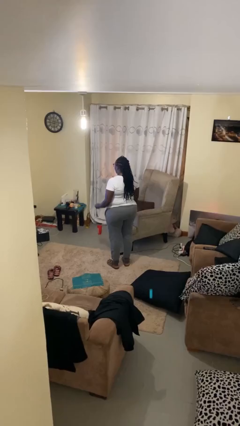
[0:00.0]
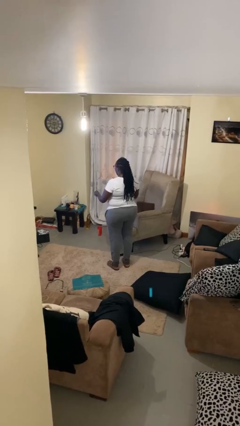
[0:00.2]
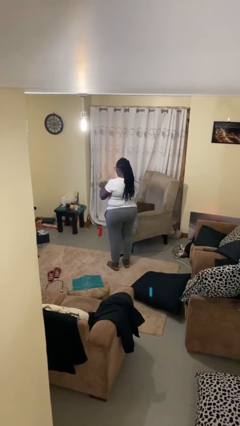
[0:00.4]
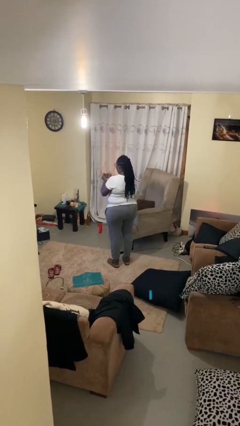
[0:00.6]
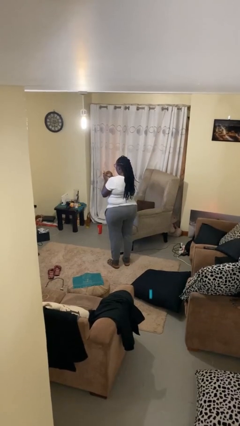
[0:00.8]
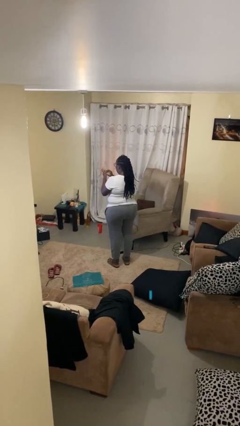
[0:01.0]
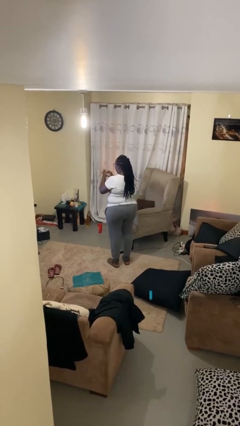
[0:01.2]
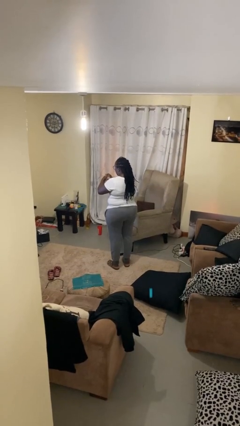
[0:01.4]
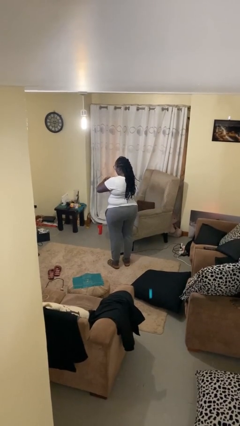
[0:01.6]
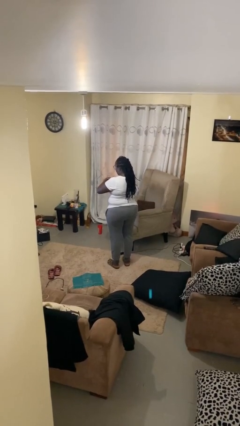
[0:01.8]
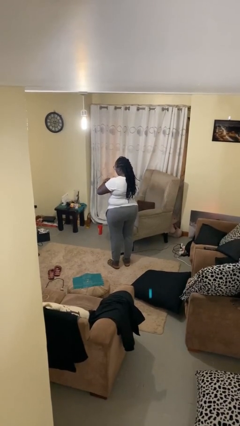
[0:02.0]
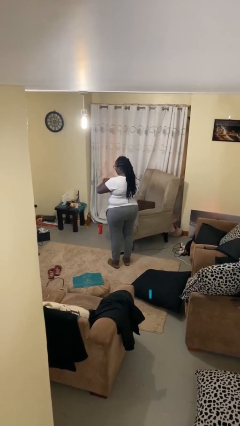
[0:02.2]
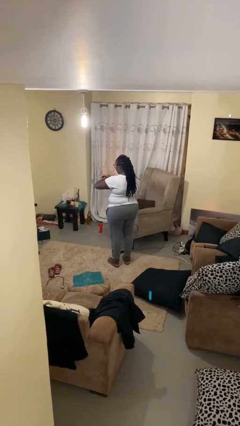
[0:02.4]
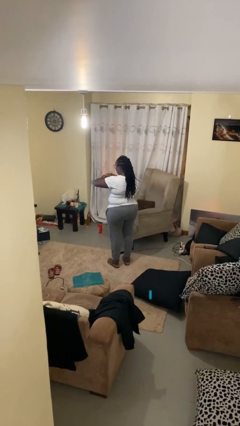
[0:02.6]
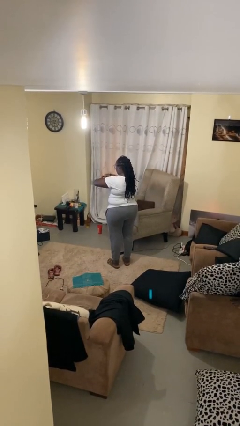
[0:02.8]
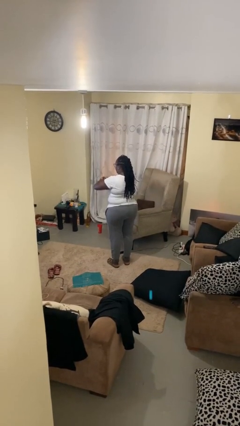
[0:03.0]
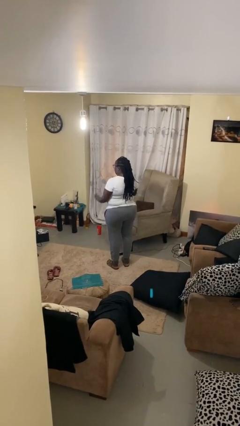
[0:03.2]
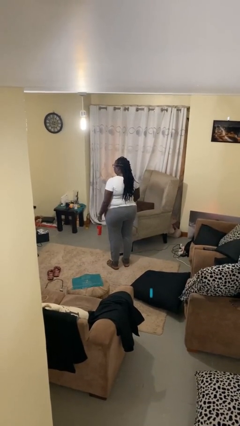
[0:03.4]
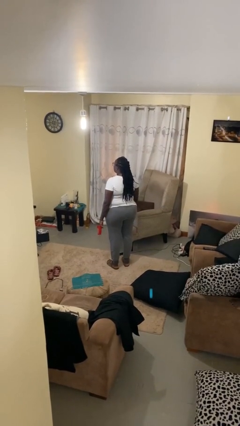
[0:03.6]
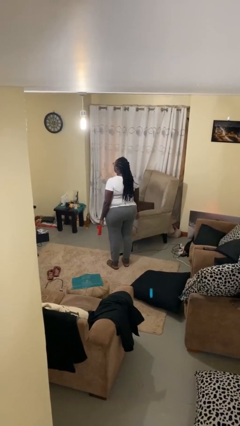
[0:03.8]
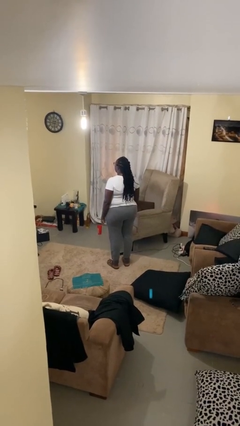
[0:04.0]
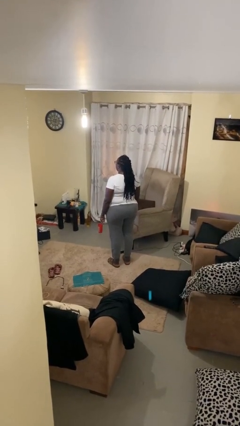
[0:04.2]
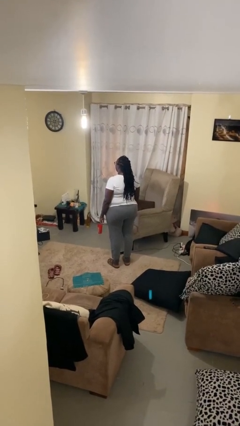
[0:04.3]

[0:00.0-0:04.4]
person puts on wristwatch

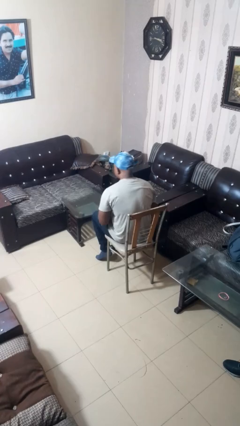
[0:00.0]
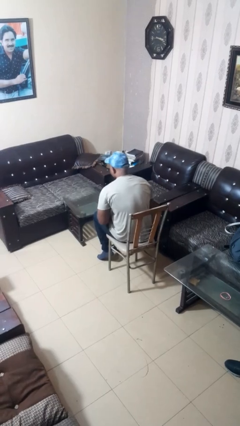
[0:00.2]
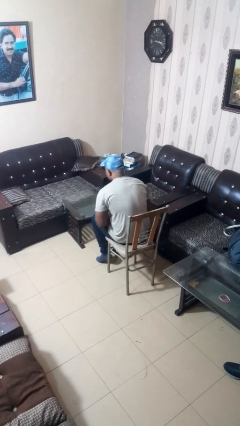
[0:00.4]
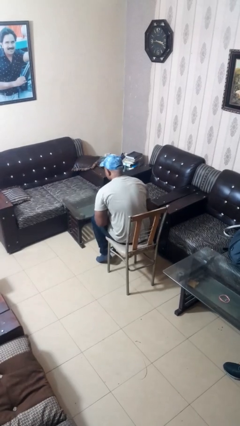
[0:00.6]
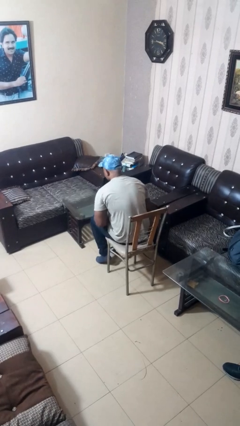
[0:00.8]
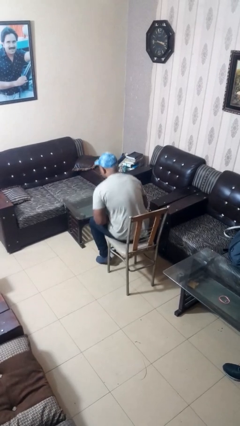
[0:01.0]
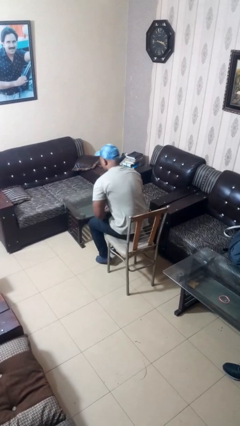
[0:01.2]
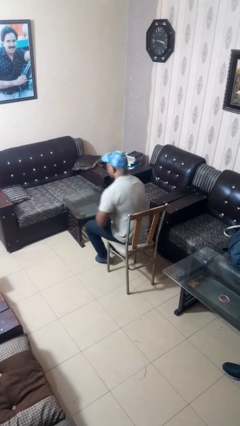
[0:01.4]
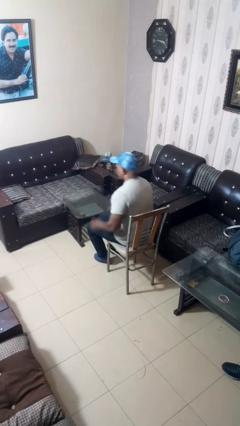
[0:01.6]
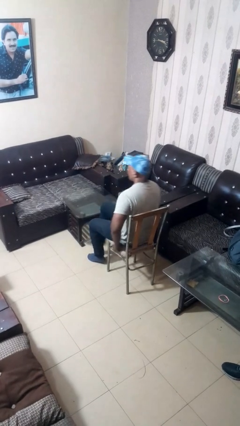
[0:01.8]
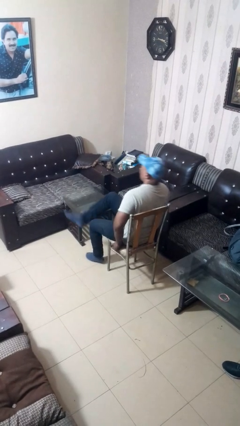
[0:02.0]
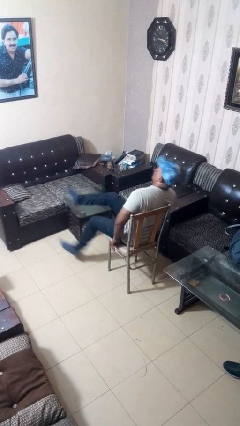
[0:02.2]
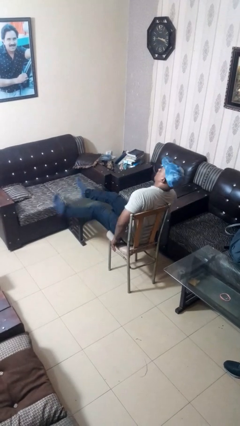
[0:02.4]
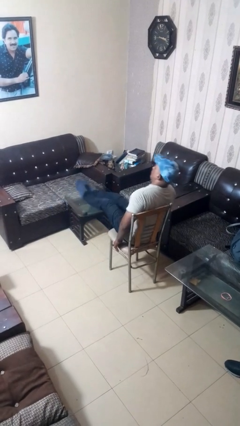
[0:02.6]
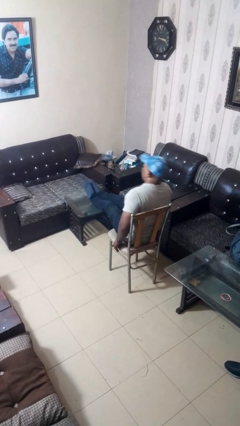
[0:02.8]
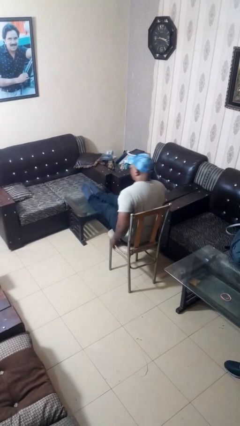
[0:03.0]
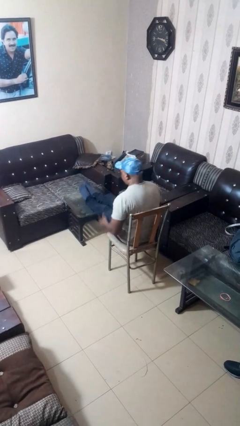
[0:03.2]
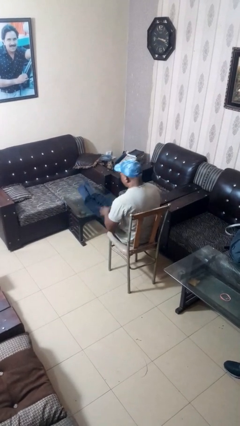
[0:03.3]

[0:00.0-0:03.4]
person puts feet up

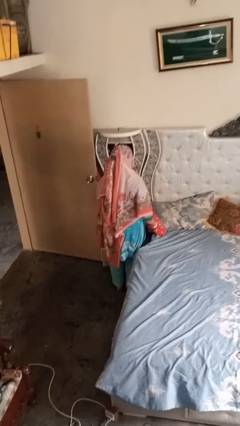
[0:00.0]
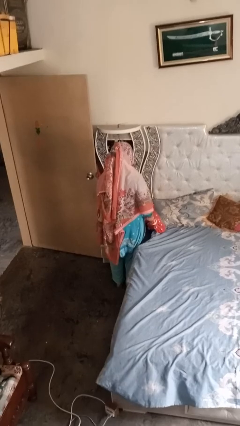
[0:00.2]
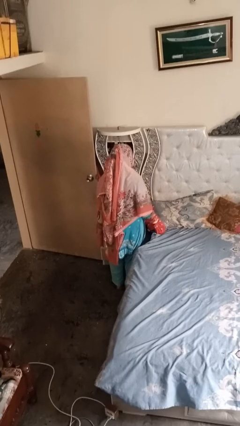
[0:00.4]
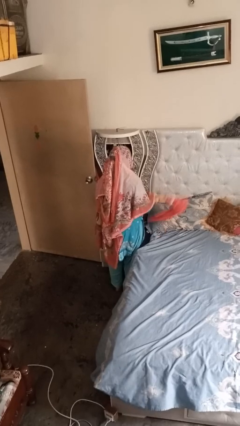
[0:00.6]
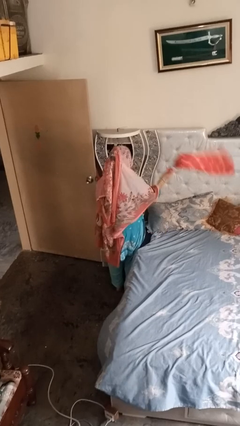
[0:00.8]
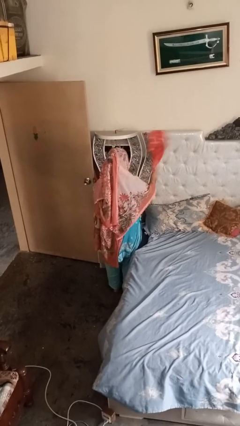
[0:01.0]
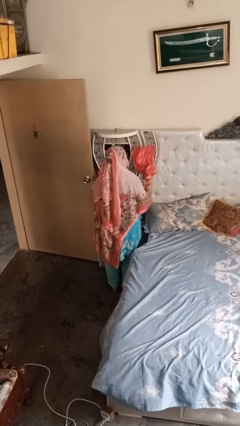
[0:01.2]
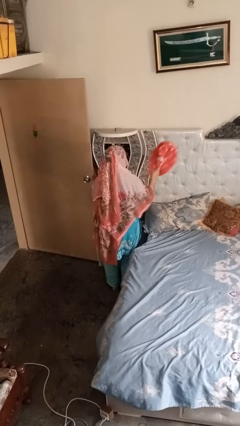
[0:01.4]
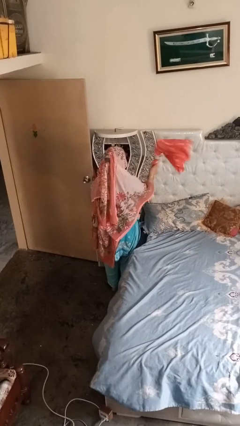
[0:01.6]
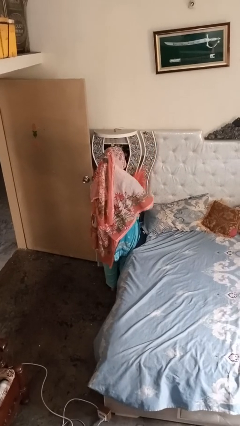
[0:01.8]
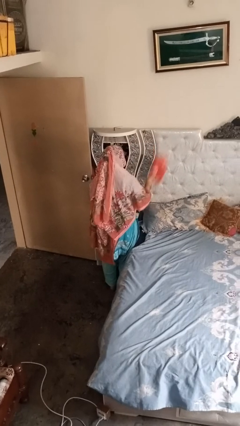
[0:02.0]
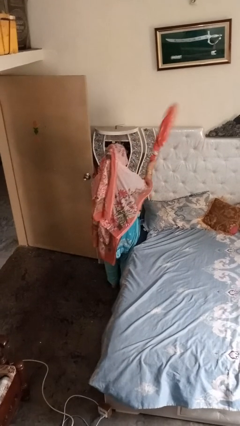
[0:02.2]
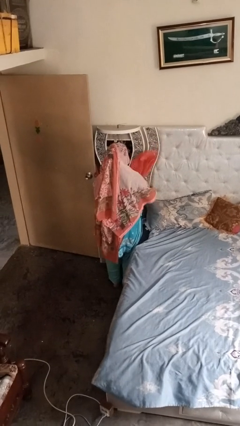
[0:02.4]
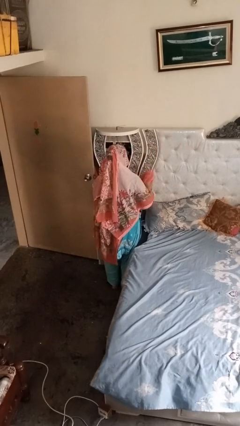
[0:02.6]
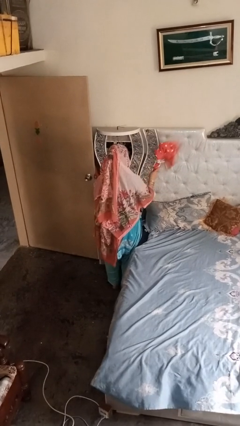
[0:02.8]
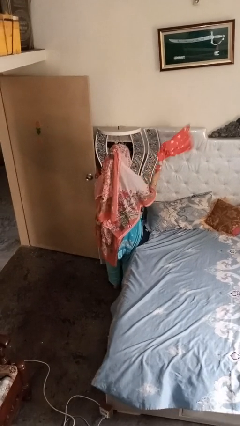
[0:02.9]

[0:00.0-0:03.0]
person dusts furniture

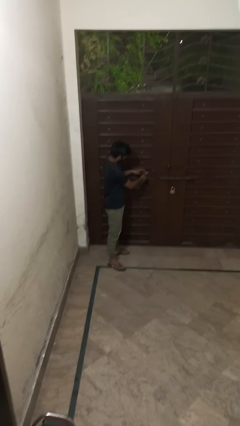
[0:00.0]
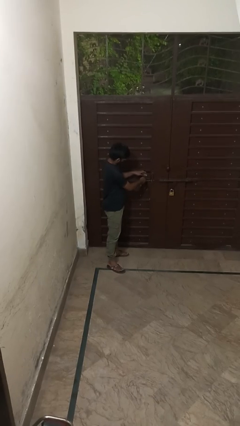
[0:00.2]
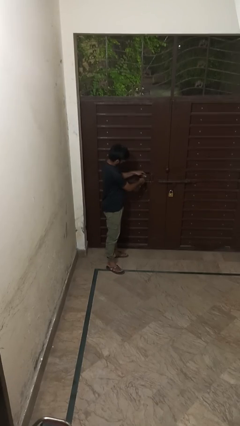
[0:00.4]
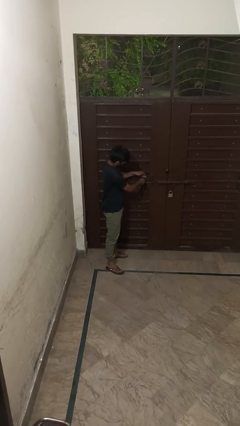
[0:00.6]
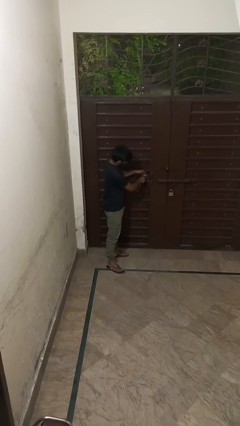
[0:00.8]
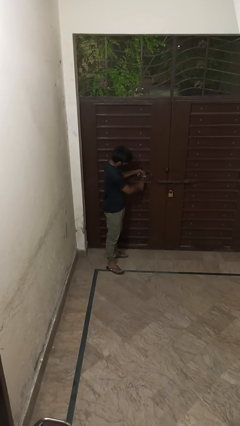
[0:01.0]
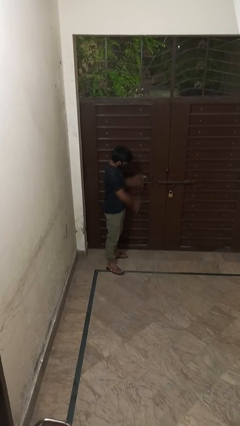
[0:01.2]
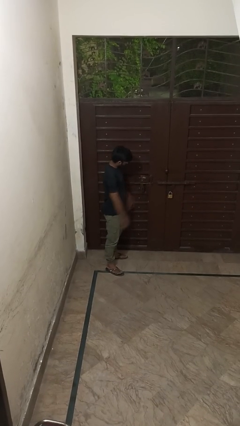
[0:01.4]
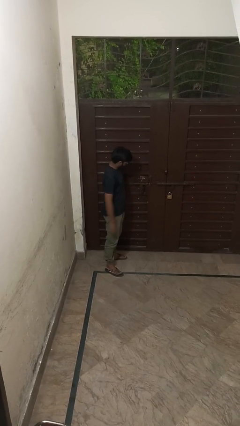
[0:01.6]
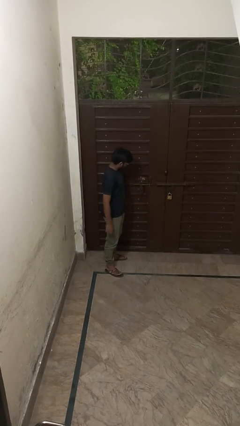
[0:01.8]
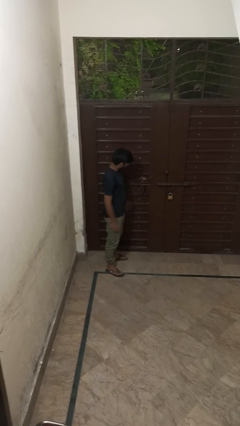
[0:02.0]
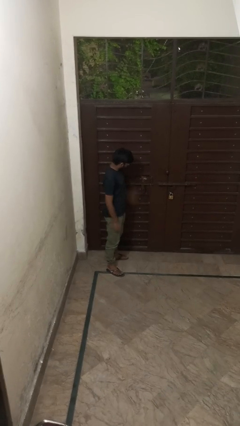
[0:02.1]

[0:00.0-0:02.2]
person unlocks door with keys

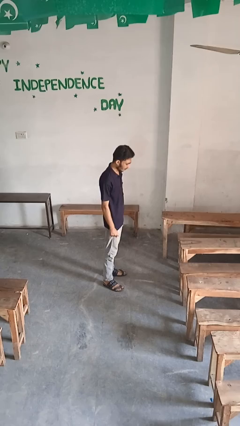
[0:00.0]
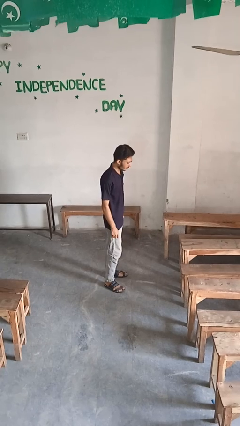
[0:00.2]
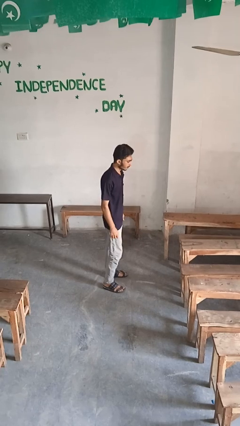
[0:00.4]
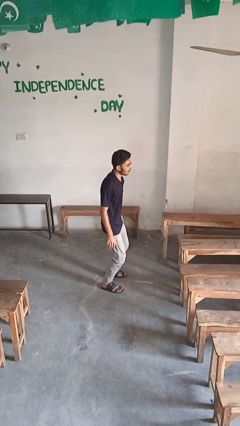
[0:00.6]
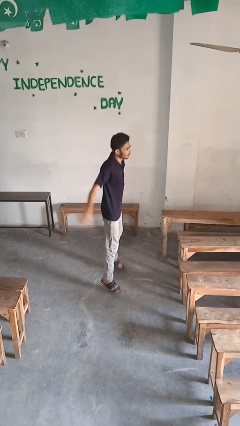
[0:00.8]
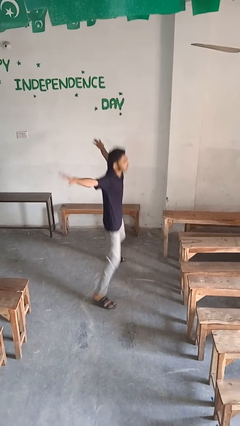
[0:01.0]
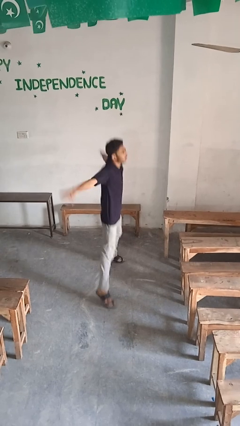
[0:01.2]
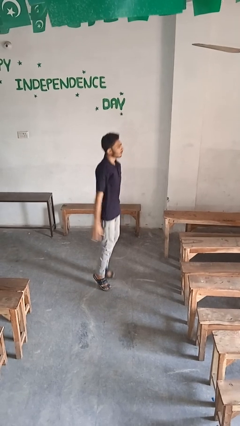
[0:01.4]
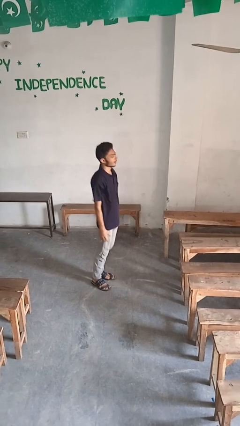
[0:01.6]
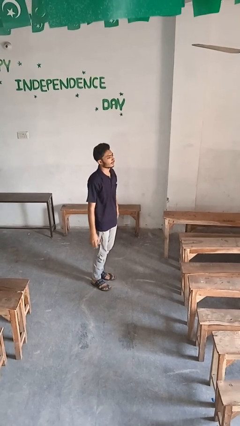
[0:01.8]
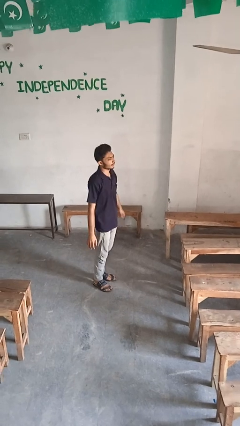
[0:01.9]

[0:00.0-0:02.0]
person exercises with jumping jacks

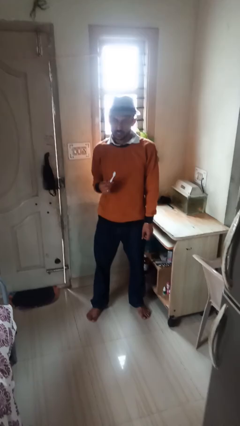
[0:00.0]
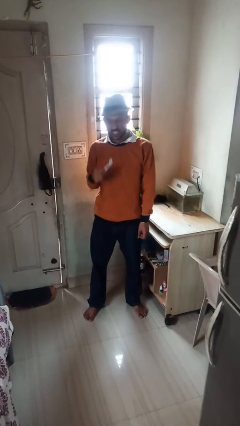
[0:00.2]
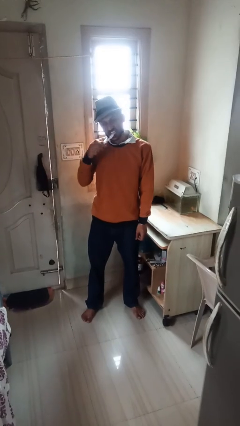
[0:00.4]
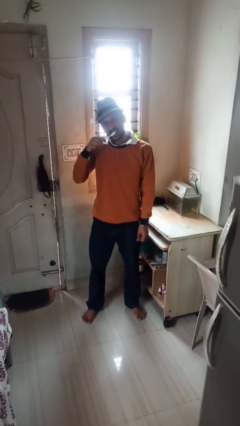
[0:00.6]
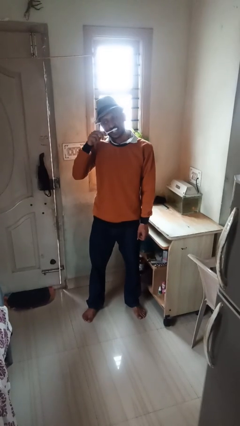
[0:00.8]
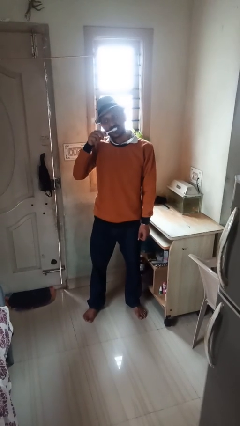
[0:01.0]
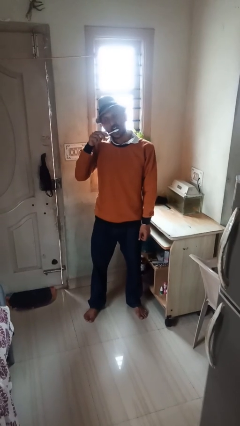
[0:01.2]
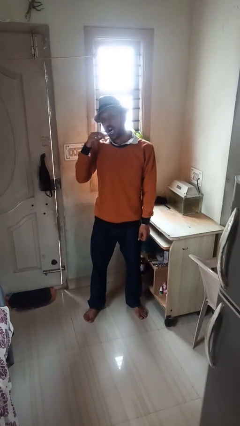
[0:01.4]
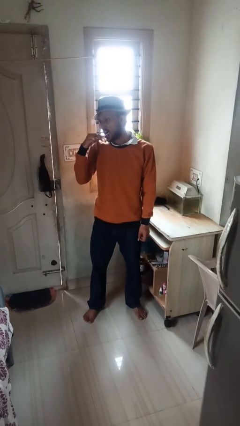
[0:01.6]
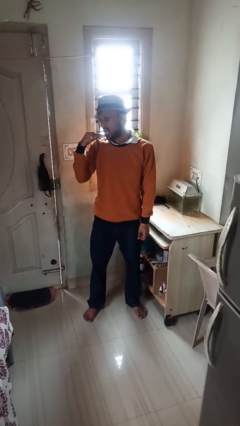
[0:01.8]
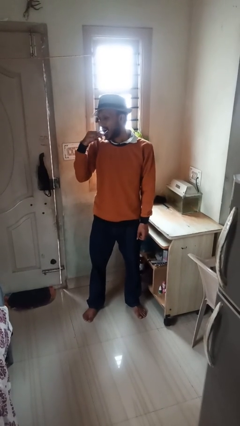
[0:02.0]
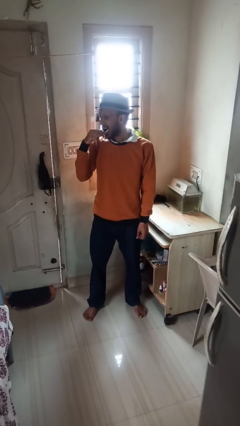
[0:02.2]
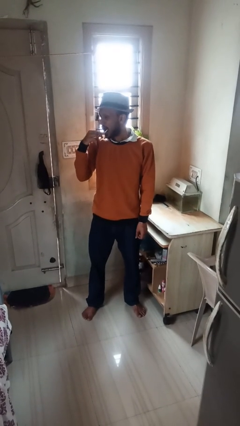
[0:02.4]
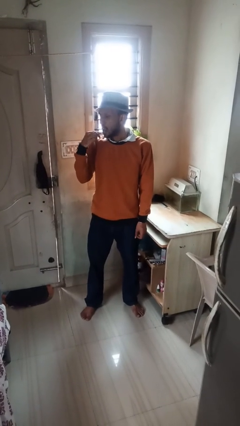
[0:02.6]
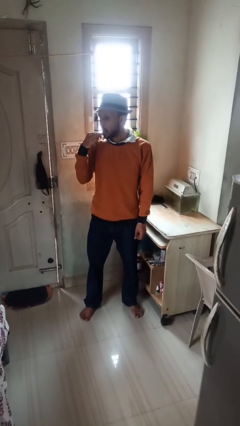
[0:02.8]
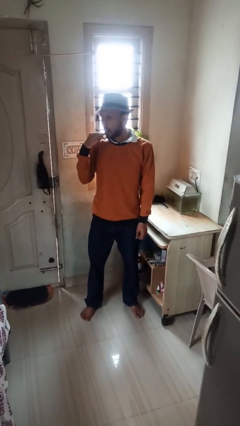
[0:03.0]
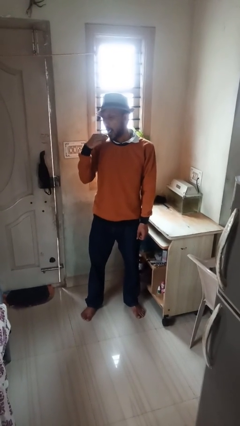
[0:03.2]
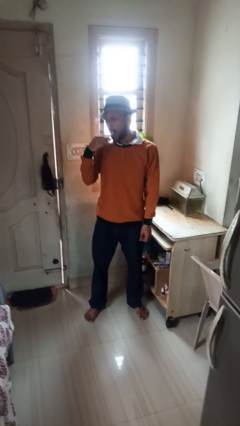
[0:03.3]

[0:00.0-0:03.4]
person brushes teeth
